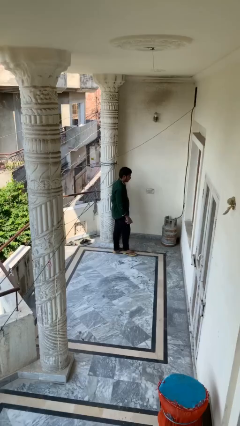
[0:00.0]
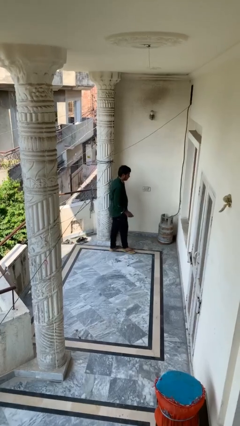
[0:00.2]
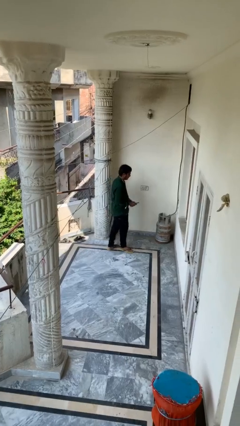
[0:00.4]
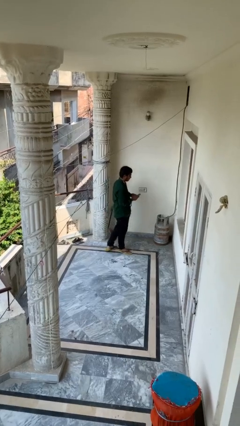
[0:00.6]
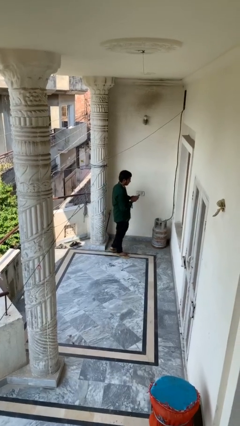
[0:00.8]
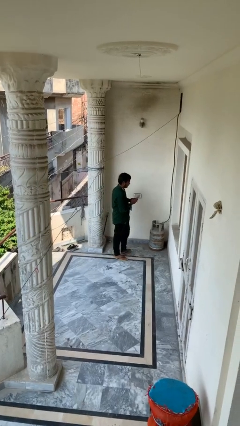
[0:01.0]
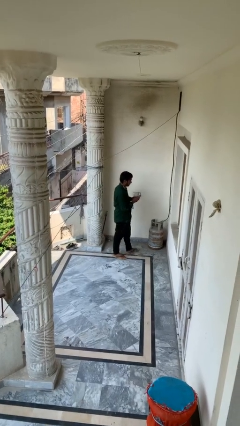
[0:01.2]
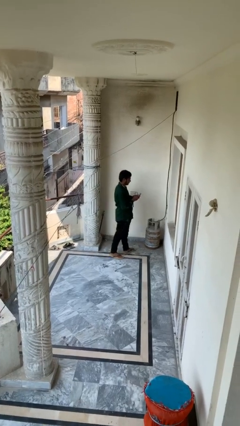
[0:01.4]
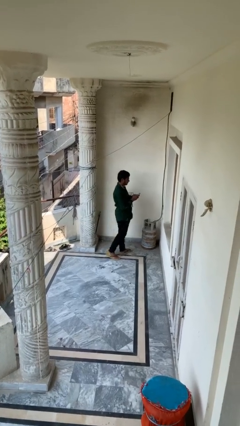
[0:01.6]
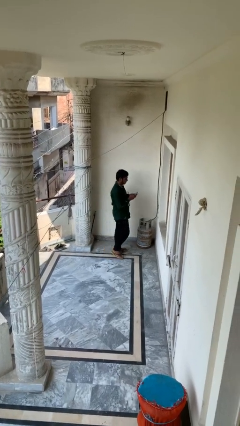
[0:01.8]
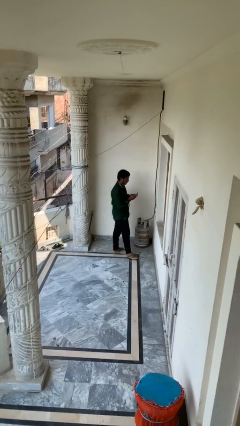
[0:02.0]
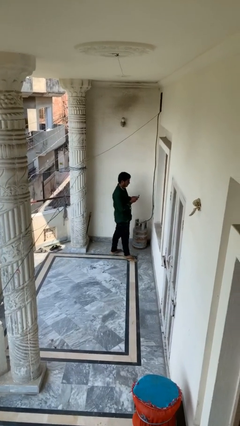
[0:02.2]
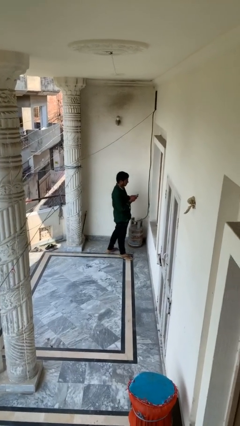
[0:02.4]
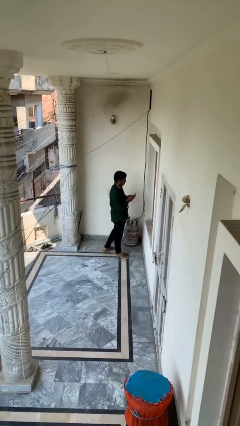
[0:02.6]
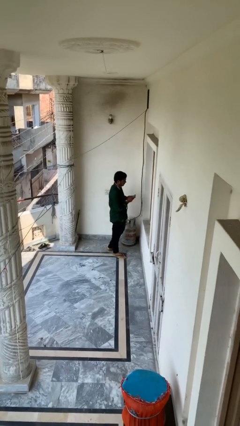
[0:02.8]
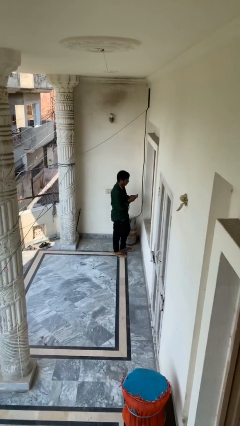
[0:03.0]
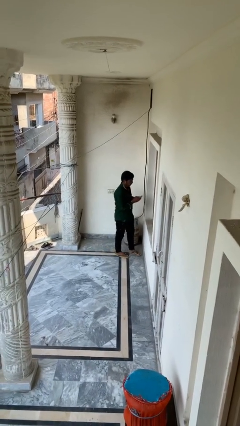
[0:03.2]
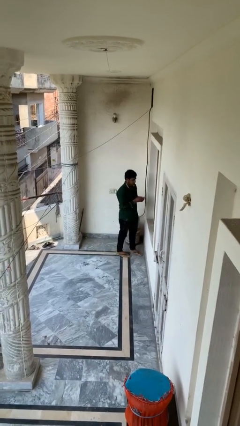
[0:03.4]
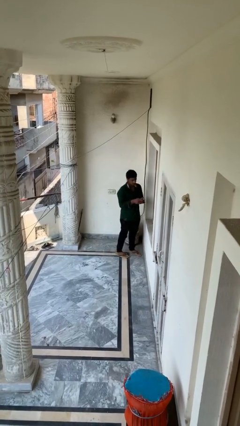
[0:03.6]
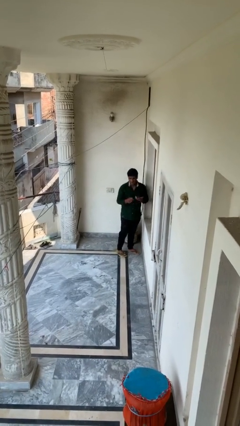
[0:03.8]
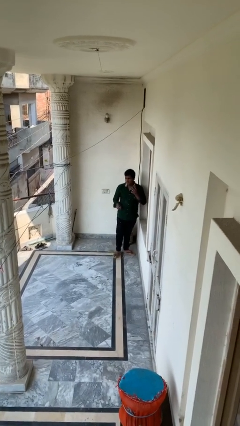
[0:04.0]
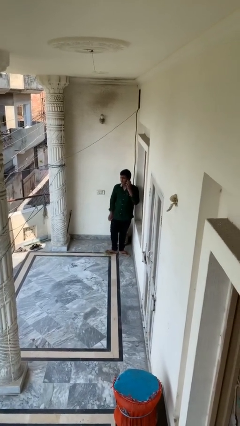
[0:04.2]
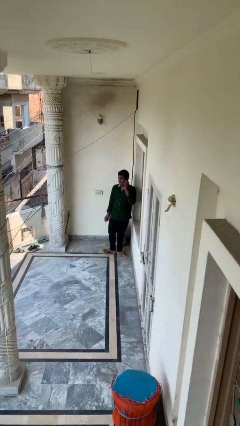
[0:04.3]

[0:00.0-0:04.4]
person texts on phone

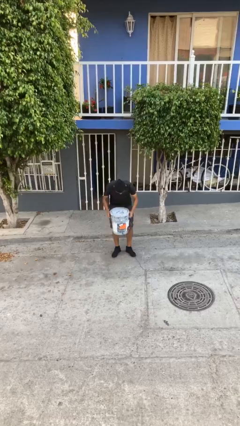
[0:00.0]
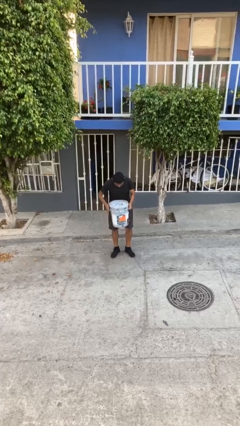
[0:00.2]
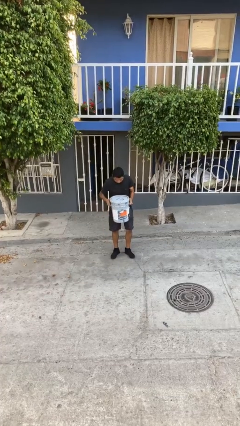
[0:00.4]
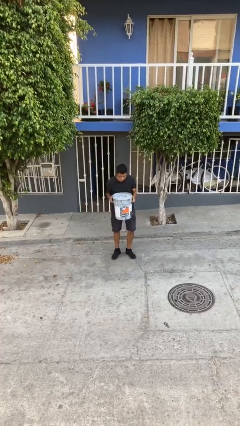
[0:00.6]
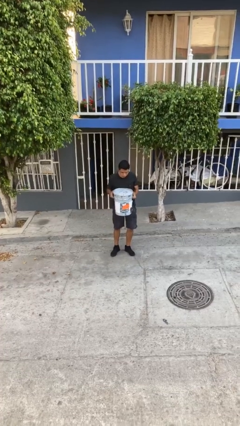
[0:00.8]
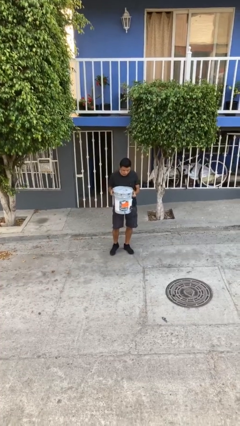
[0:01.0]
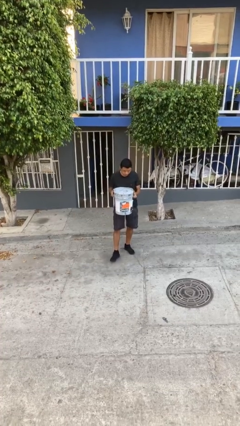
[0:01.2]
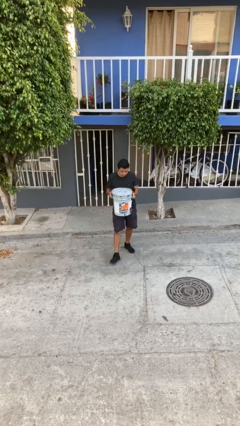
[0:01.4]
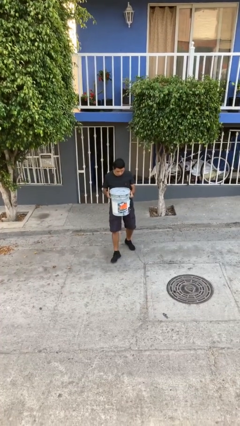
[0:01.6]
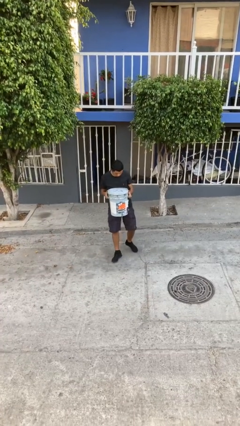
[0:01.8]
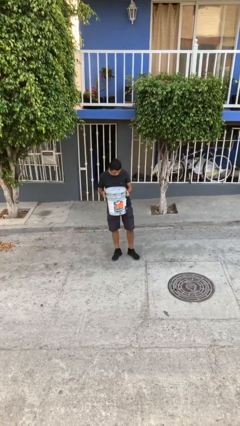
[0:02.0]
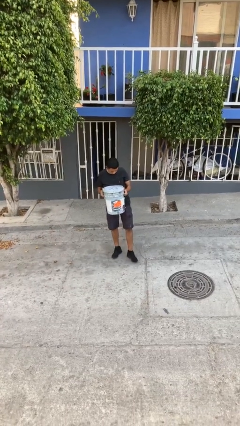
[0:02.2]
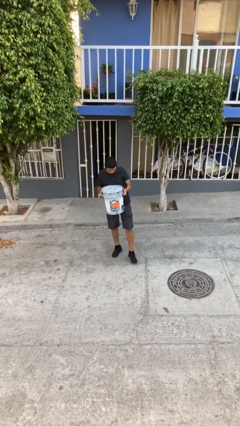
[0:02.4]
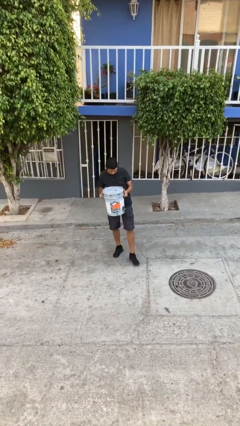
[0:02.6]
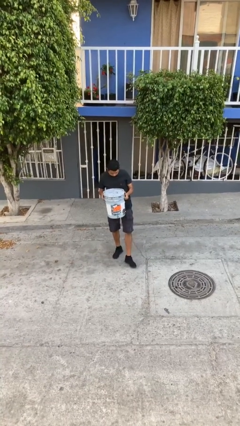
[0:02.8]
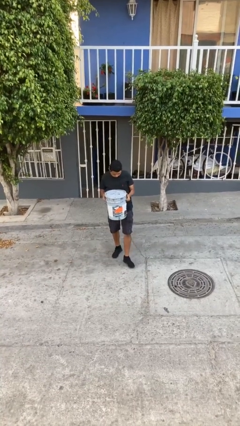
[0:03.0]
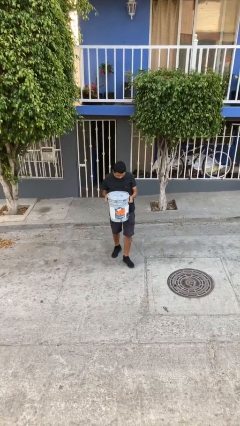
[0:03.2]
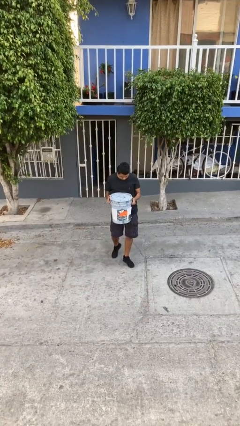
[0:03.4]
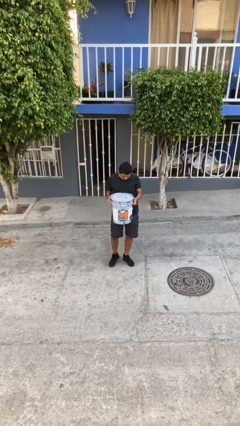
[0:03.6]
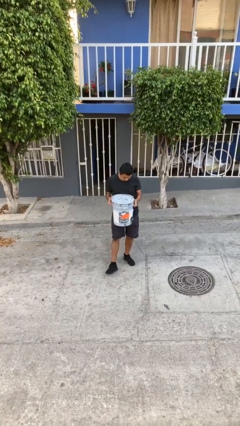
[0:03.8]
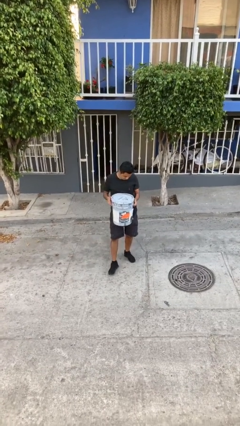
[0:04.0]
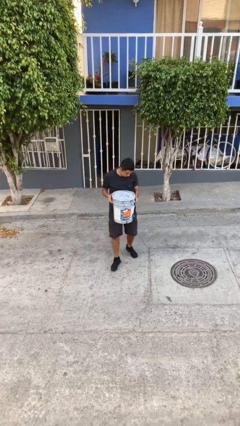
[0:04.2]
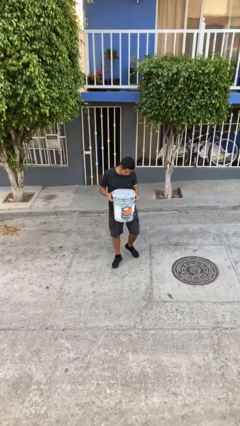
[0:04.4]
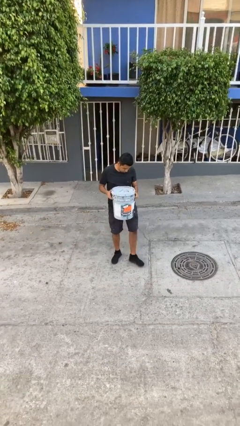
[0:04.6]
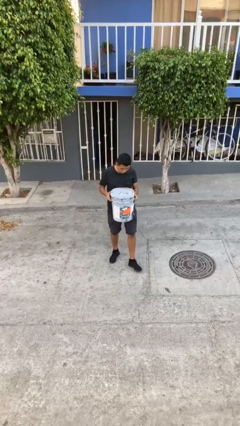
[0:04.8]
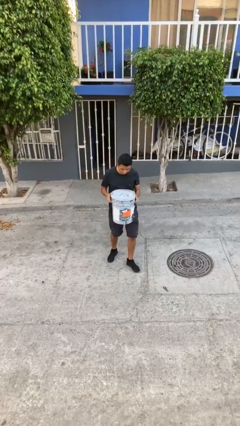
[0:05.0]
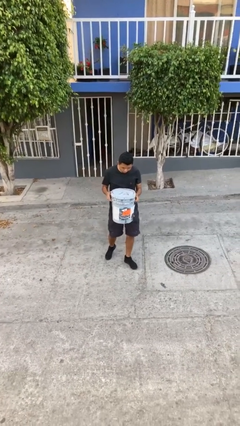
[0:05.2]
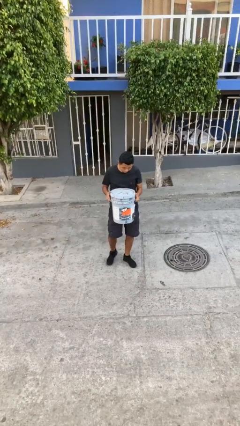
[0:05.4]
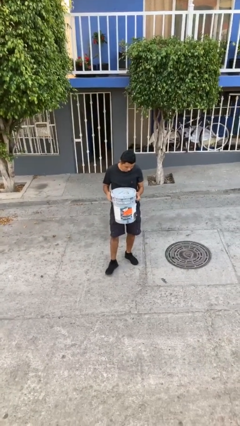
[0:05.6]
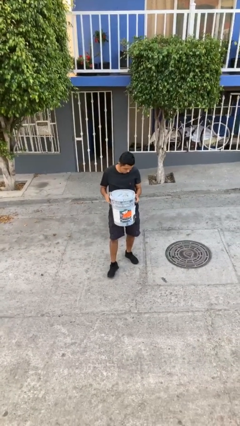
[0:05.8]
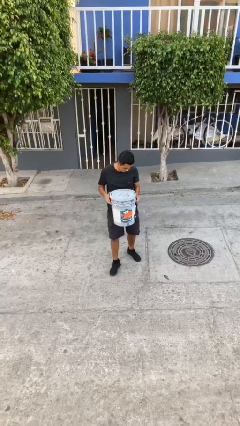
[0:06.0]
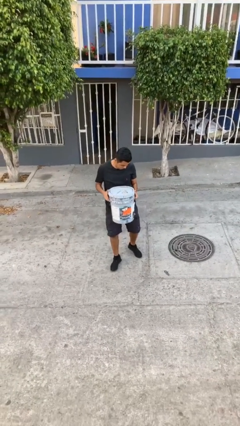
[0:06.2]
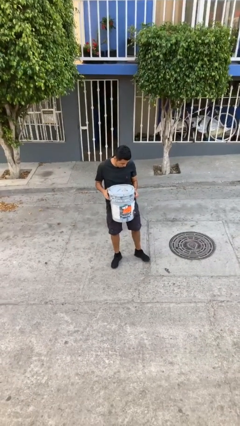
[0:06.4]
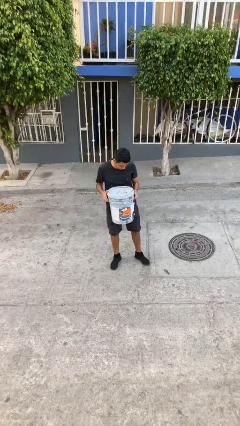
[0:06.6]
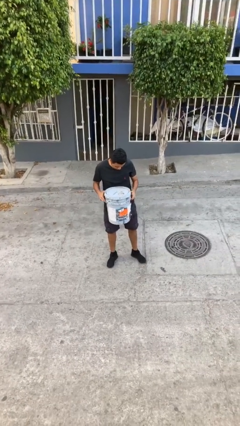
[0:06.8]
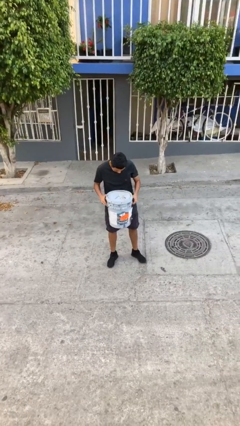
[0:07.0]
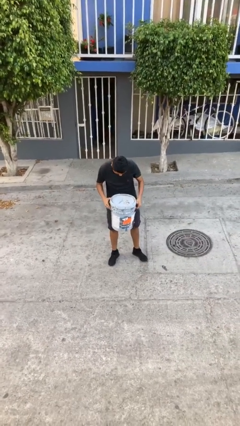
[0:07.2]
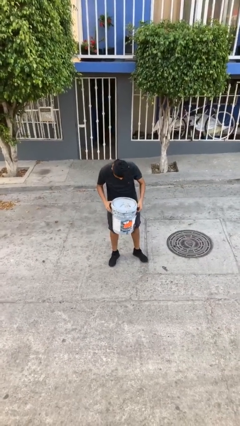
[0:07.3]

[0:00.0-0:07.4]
person carries heavy object

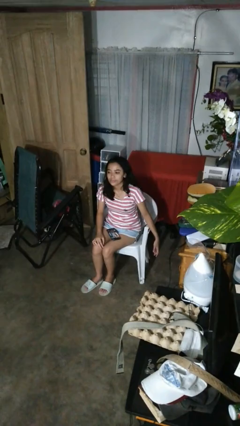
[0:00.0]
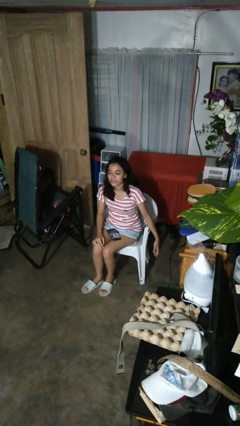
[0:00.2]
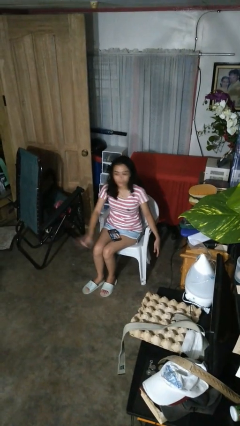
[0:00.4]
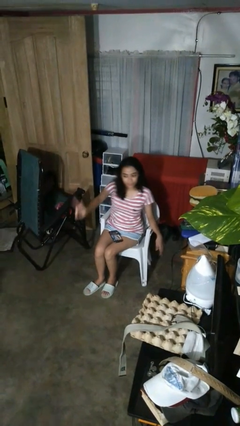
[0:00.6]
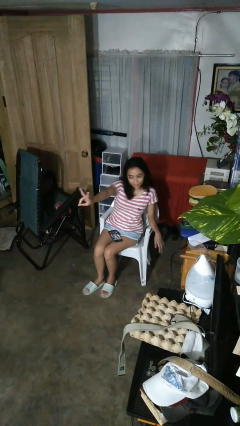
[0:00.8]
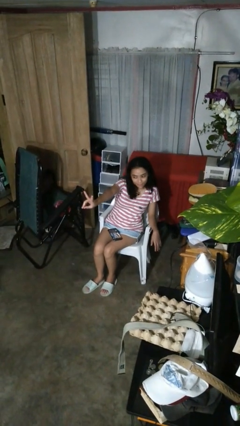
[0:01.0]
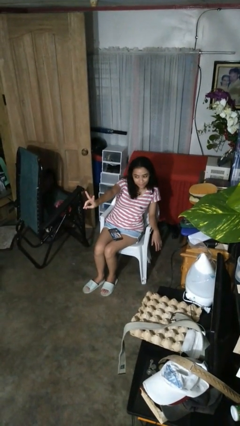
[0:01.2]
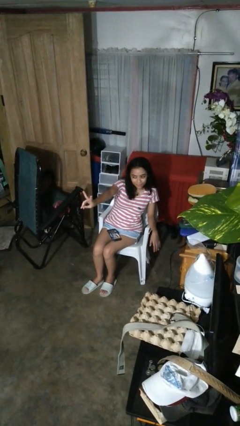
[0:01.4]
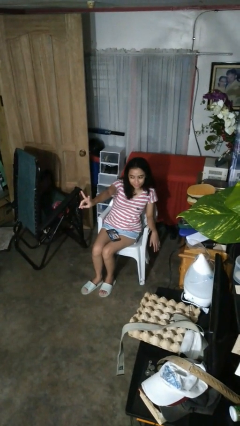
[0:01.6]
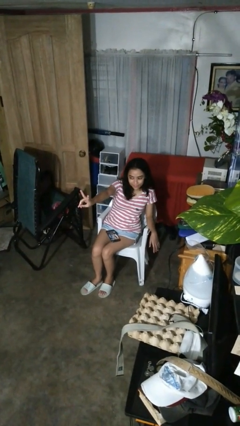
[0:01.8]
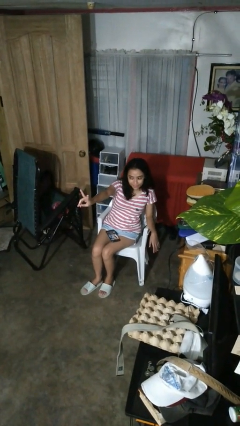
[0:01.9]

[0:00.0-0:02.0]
person gestures peace

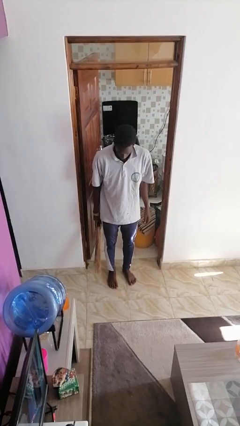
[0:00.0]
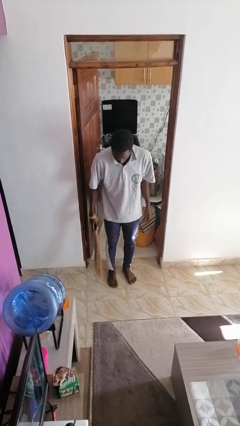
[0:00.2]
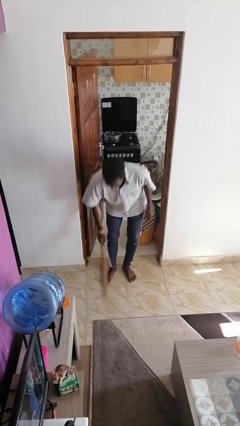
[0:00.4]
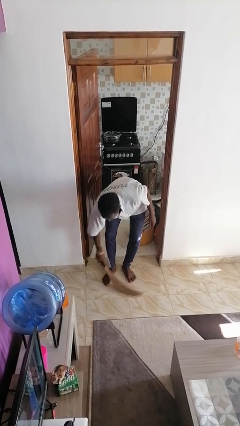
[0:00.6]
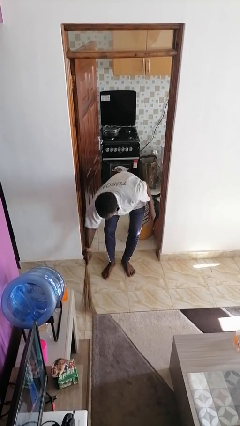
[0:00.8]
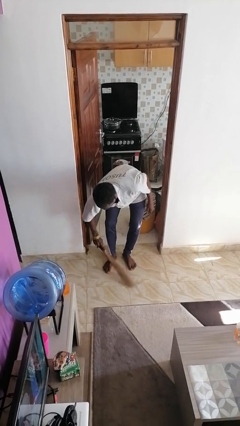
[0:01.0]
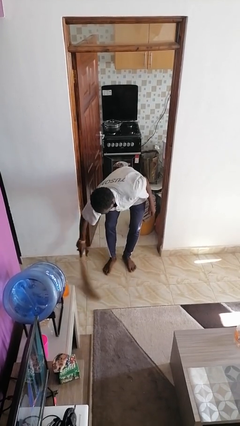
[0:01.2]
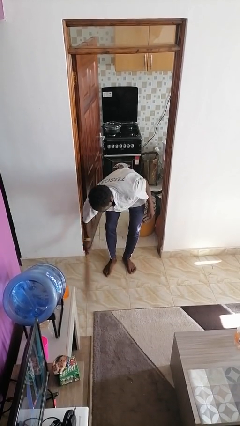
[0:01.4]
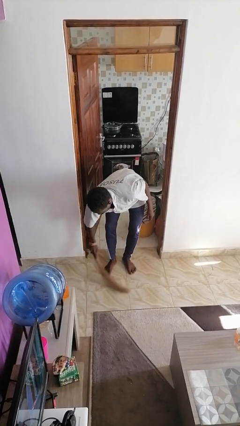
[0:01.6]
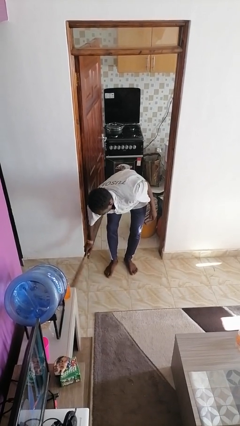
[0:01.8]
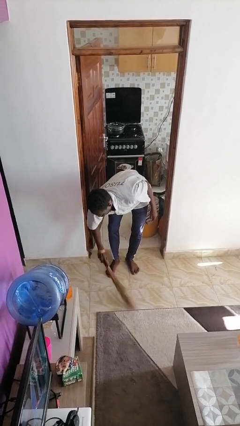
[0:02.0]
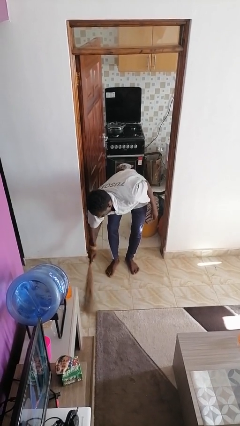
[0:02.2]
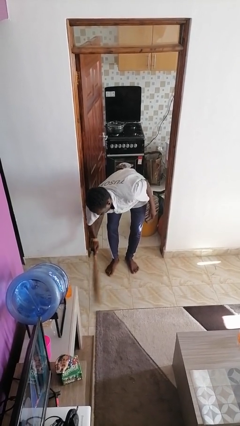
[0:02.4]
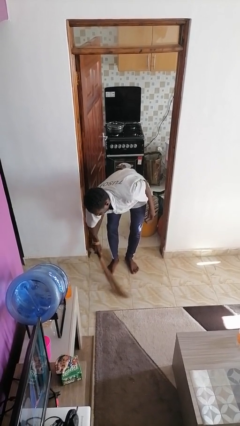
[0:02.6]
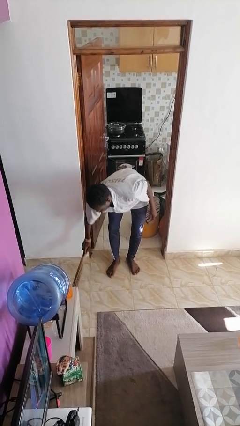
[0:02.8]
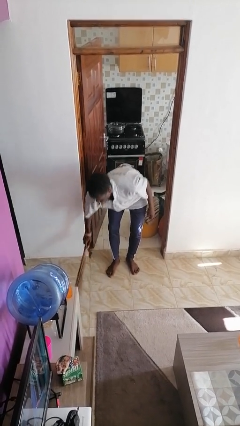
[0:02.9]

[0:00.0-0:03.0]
person sweeps floor

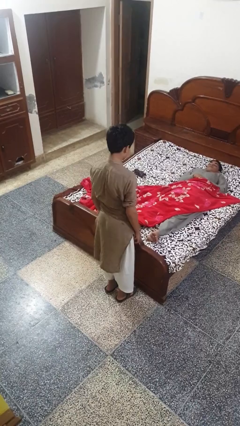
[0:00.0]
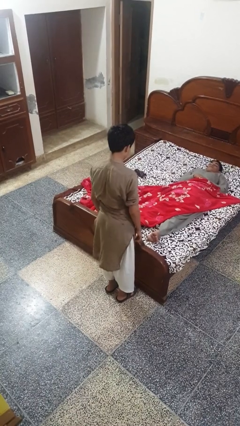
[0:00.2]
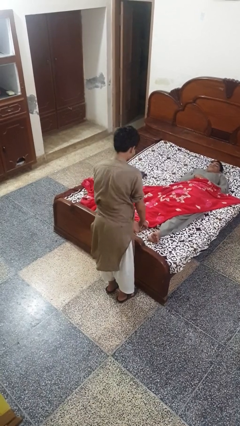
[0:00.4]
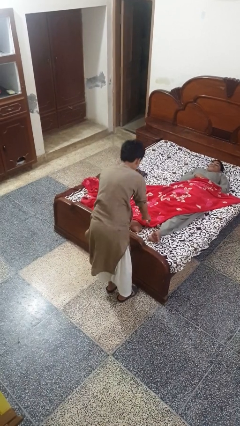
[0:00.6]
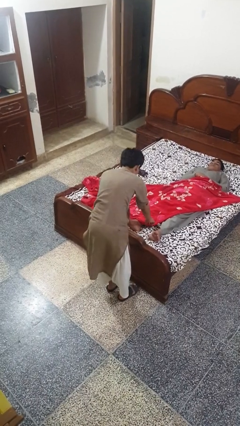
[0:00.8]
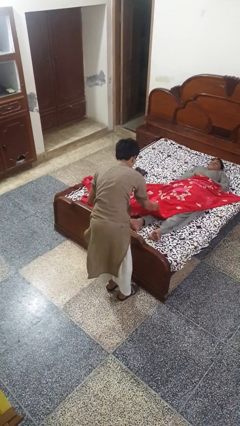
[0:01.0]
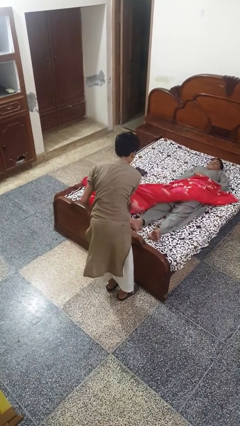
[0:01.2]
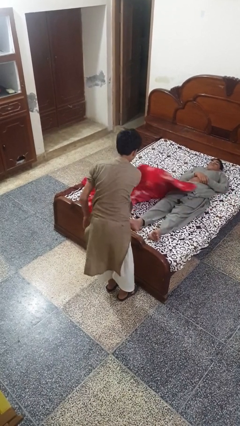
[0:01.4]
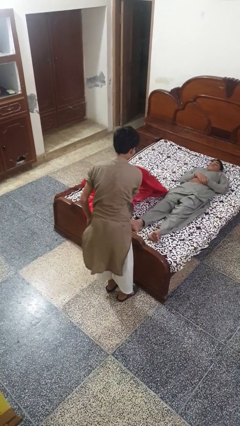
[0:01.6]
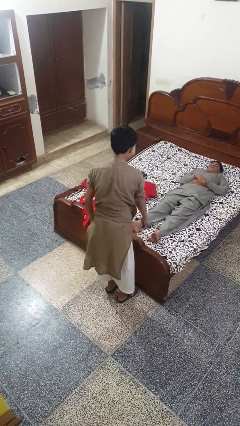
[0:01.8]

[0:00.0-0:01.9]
person uncovers friend with blanket
